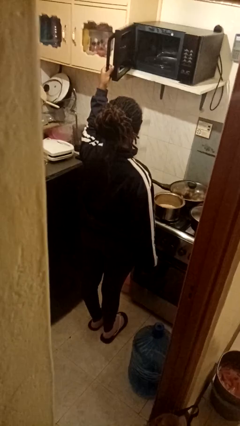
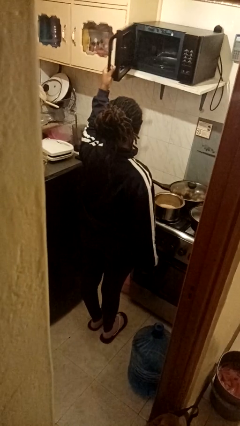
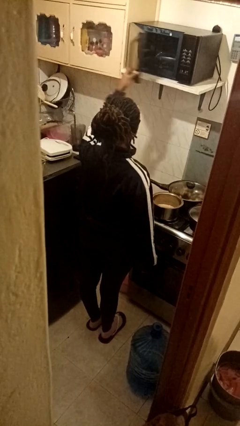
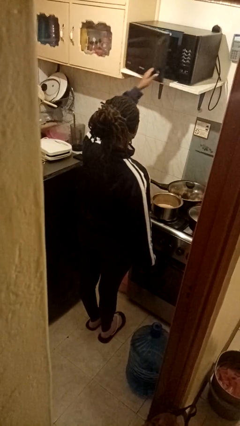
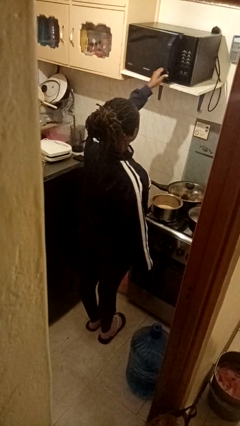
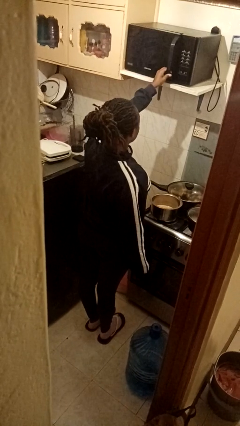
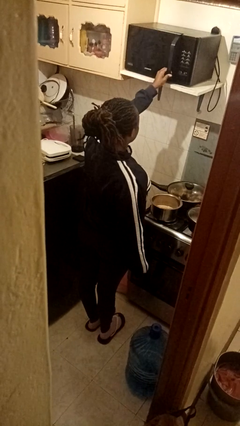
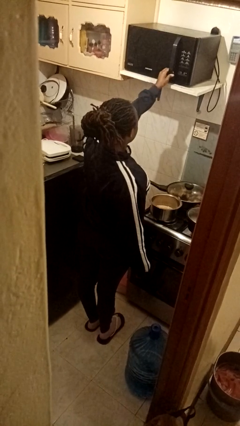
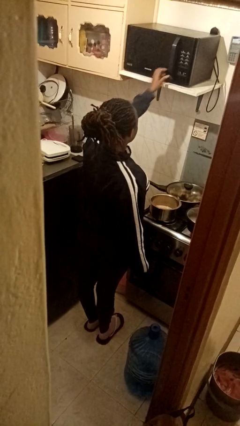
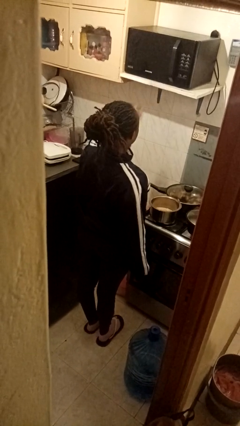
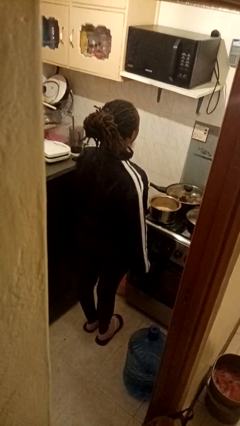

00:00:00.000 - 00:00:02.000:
person closes microwave

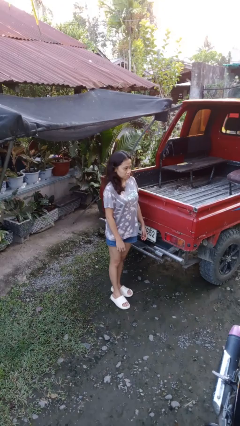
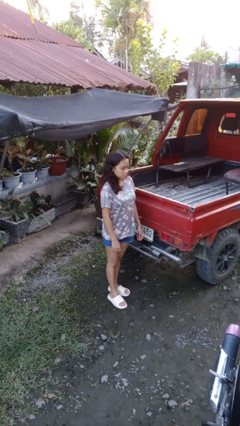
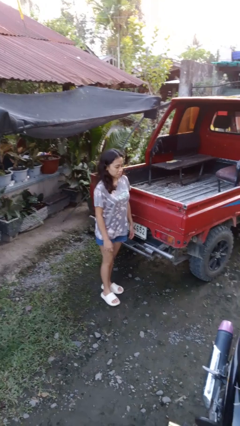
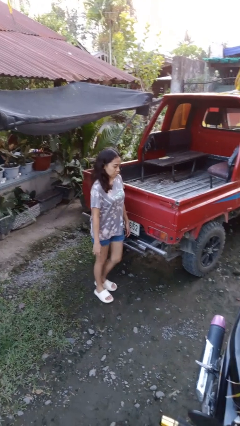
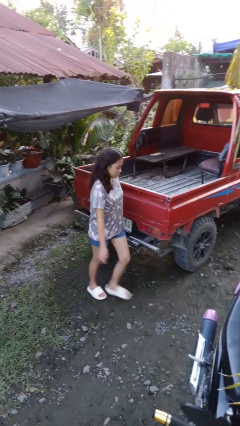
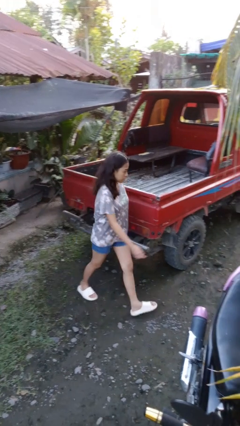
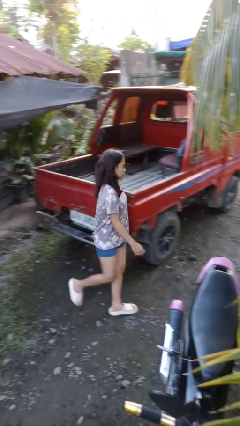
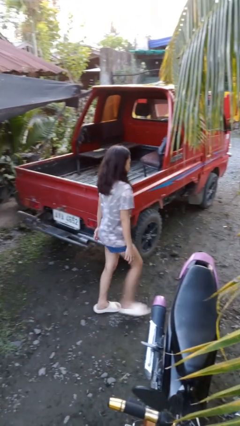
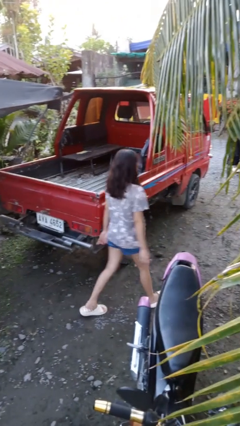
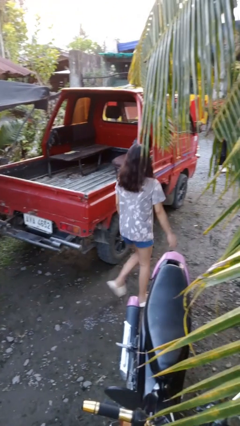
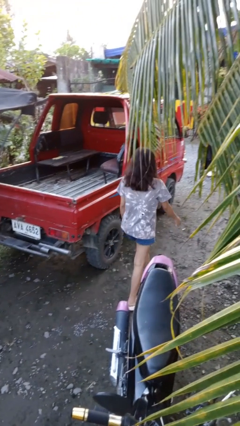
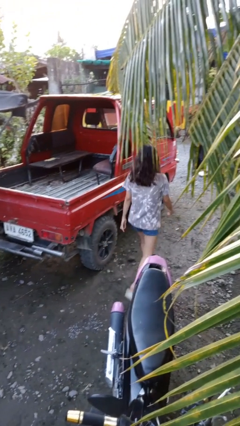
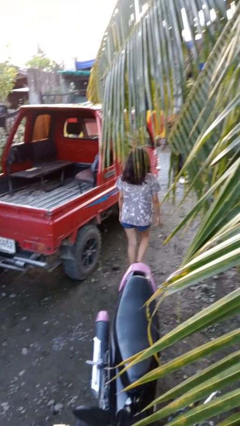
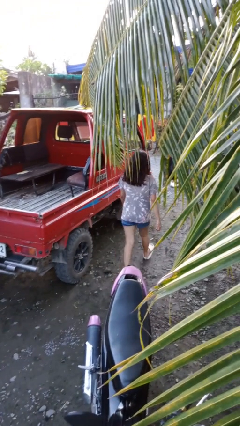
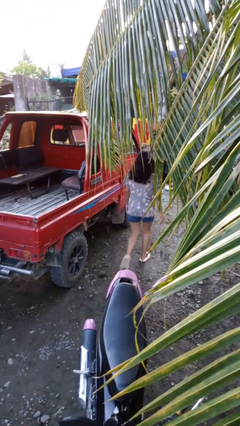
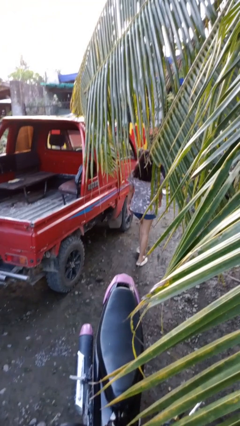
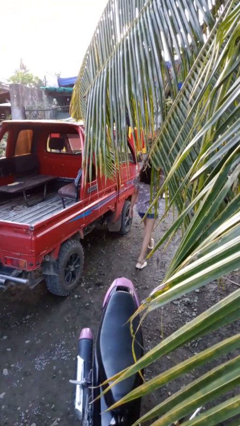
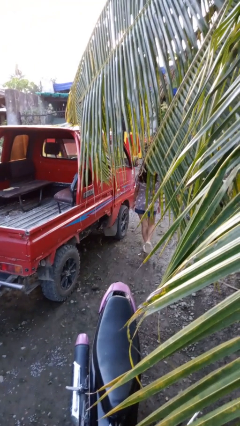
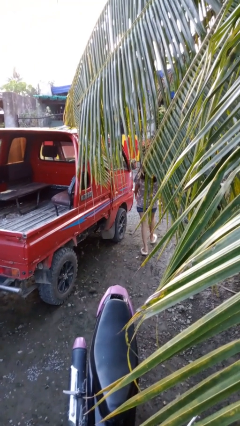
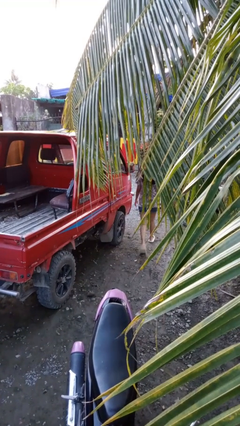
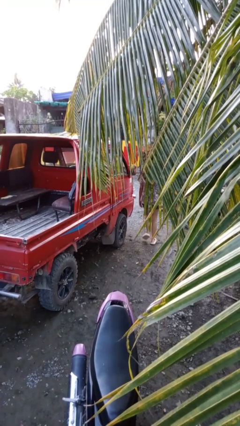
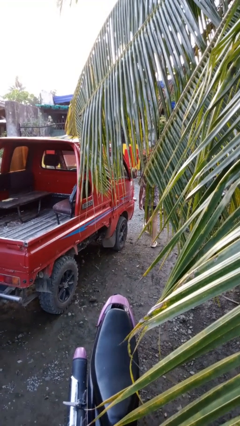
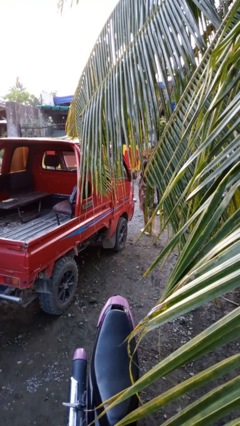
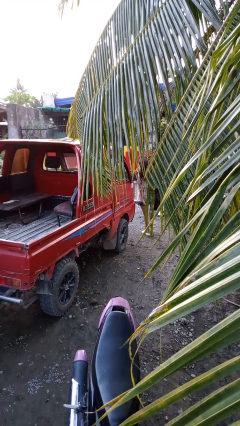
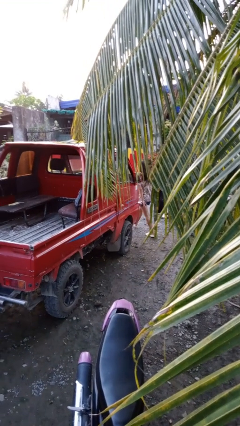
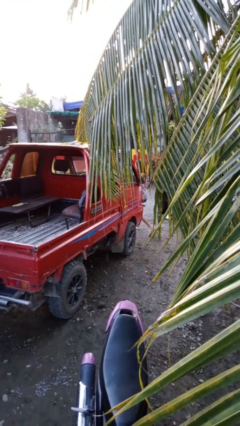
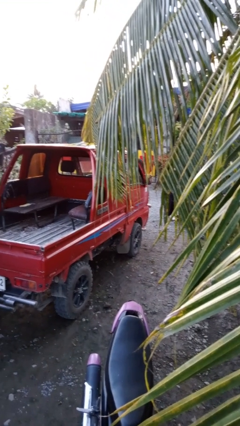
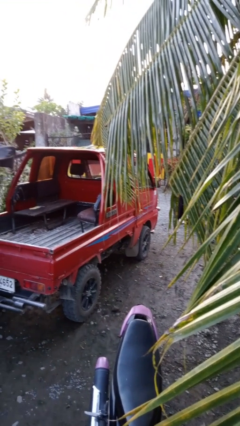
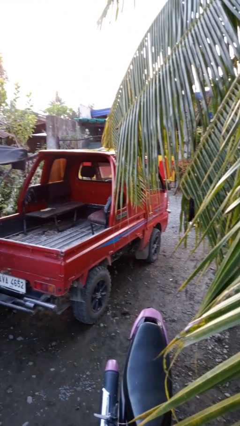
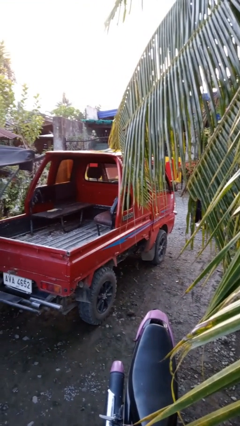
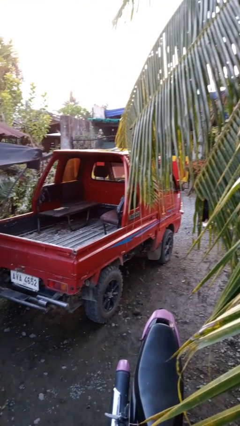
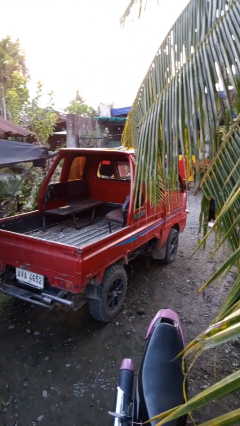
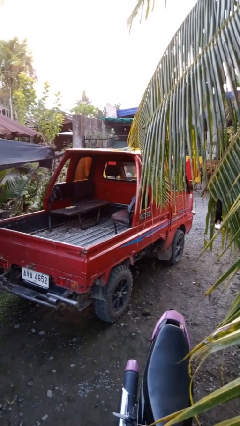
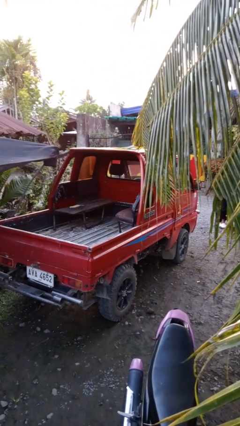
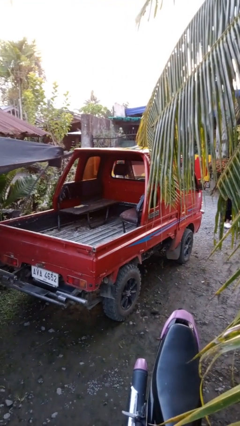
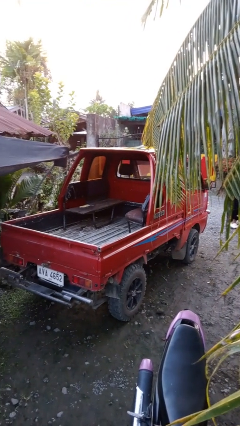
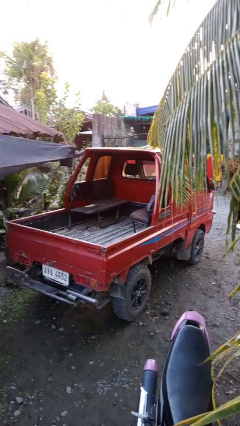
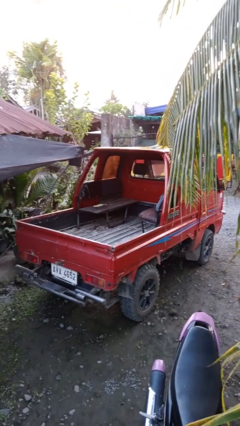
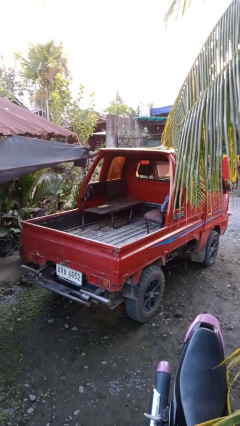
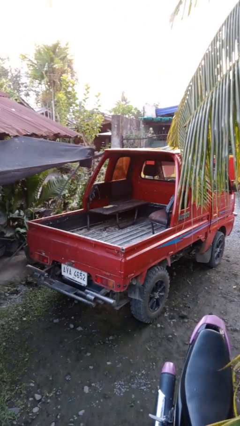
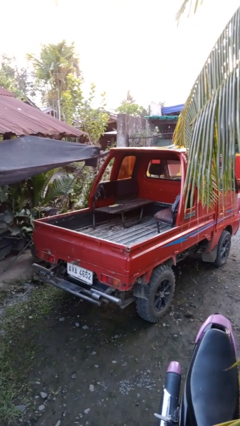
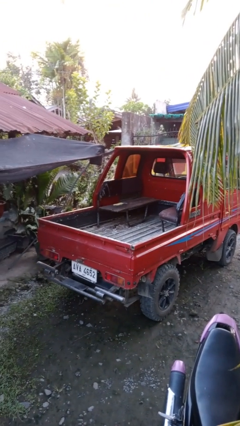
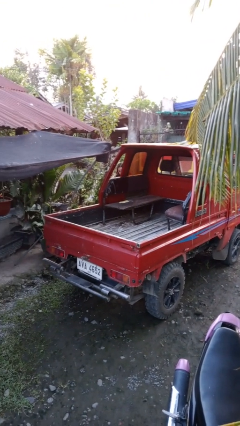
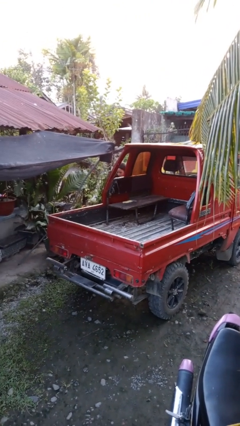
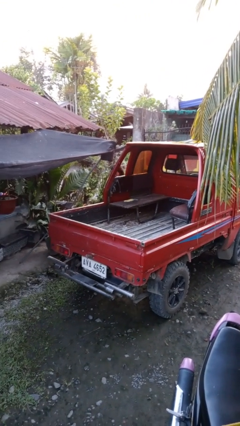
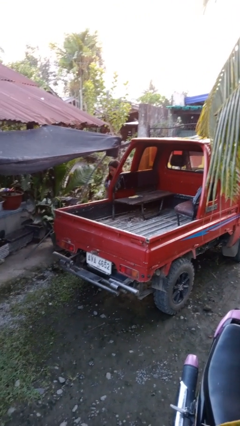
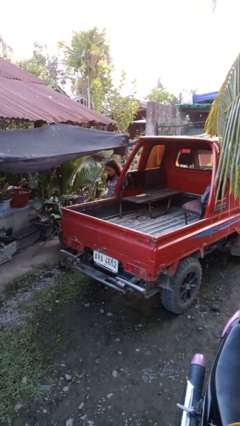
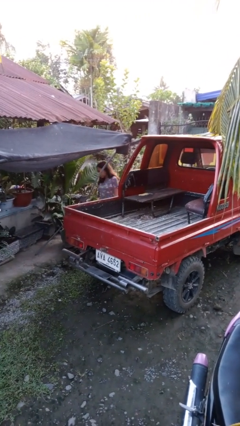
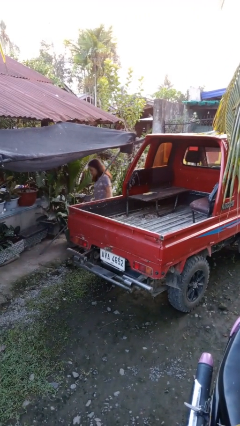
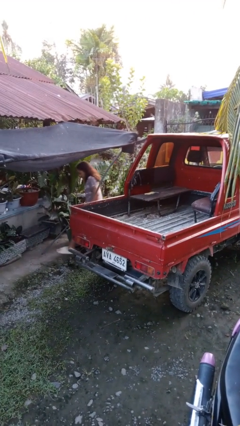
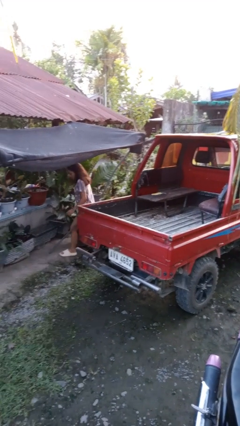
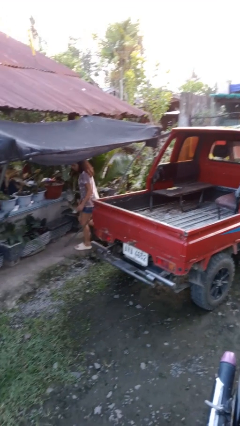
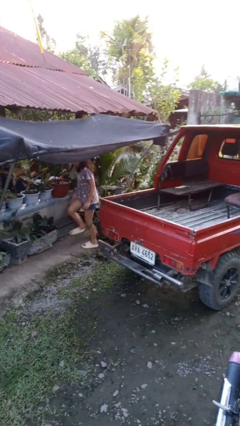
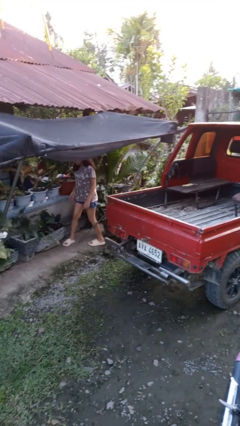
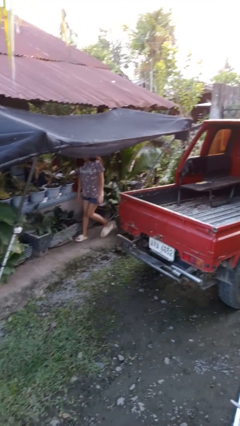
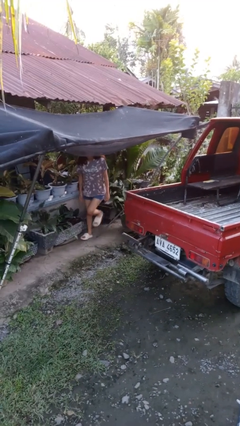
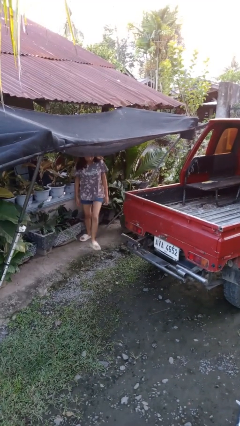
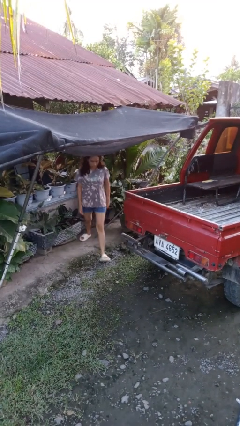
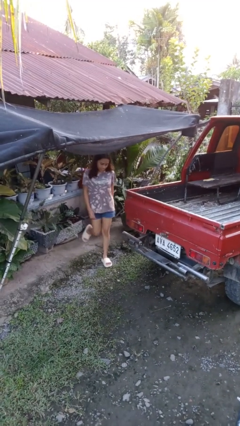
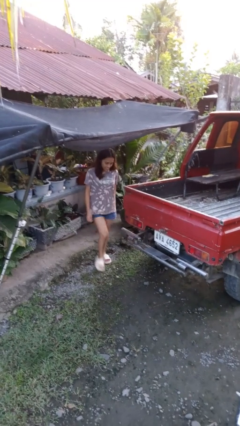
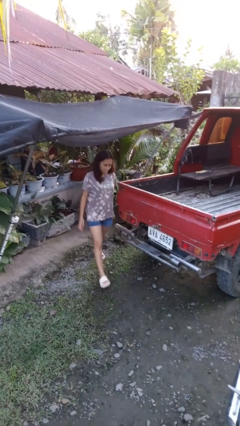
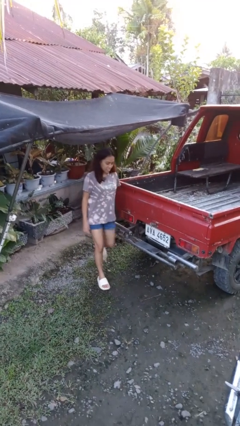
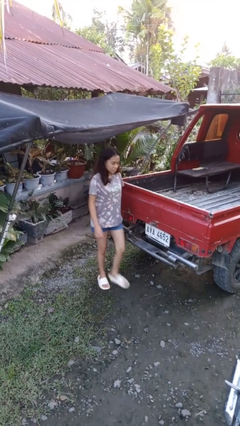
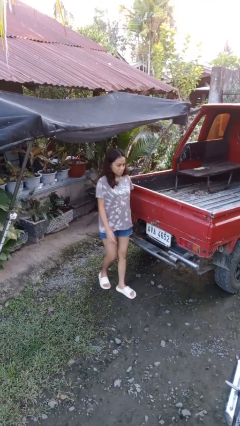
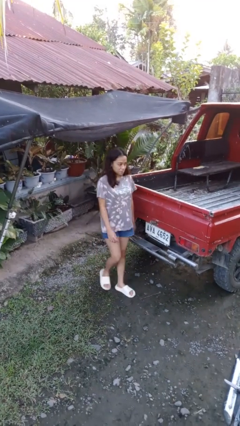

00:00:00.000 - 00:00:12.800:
person walks around car

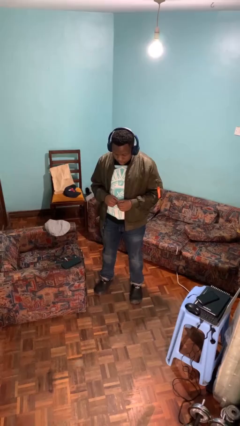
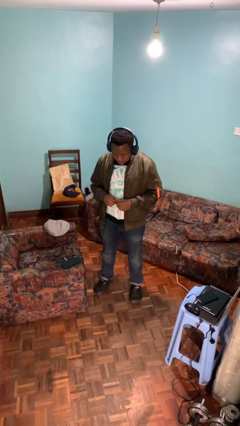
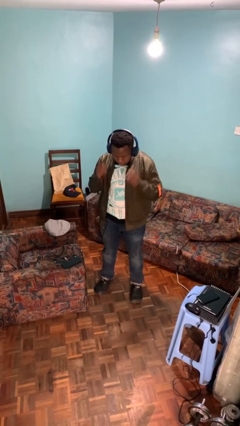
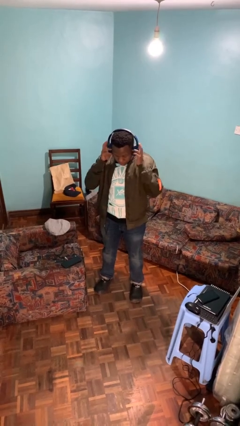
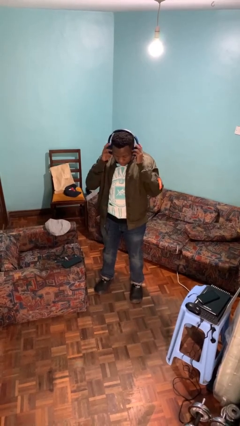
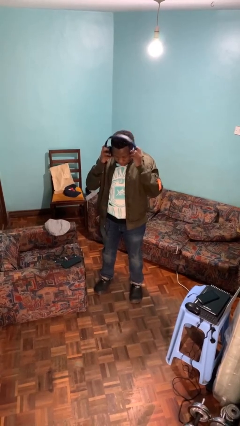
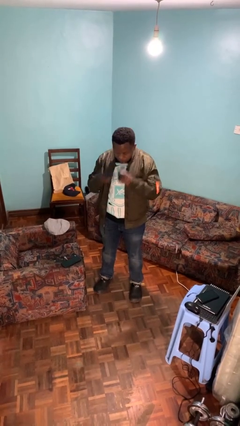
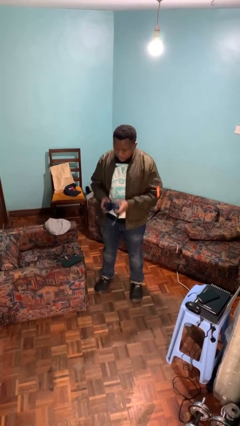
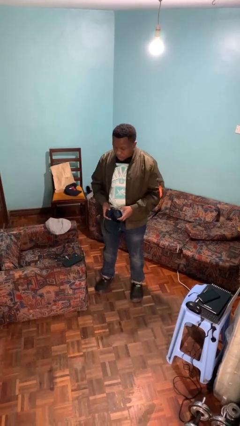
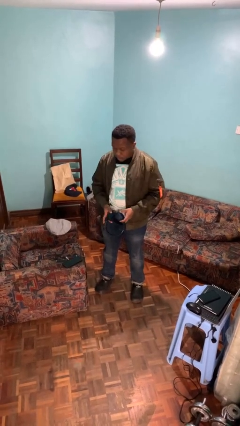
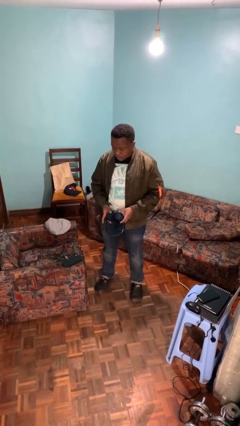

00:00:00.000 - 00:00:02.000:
person takes off headphones

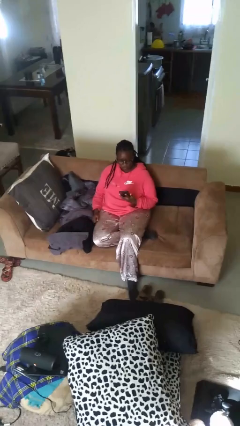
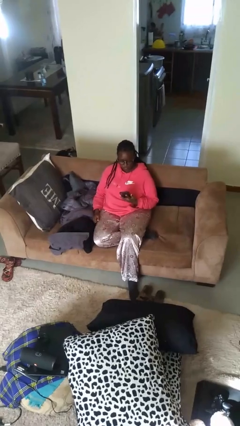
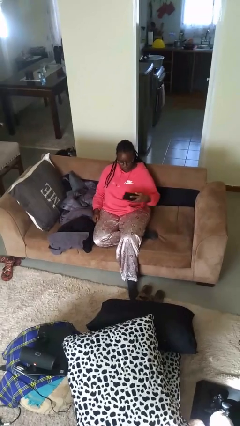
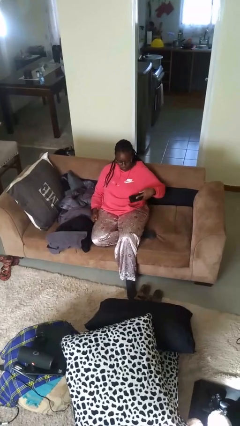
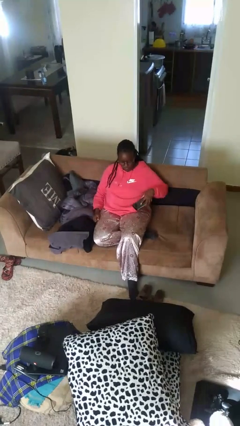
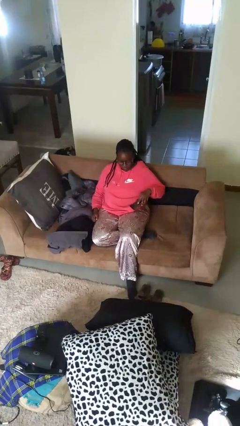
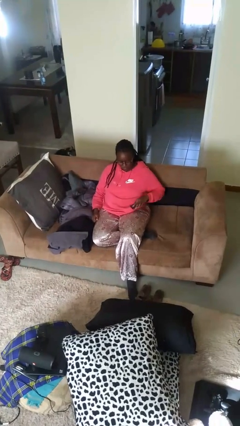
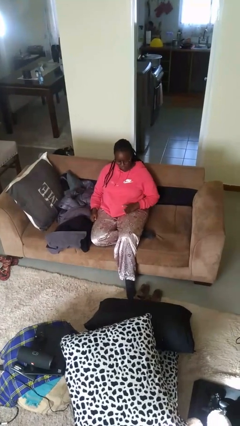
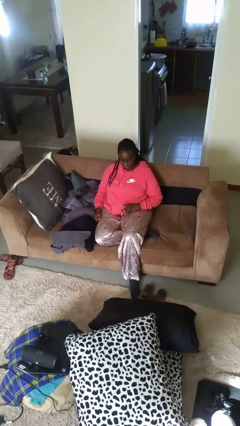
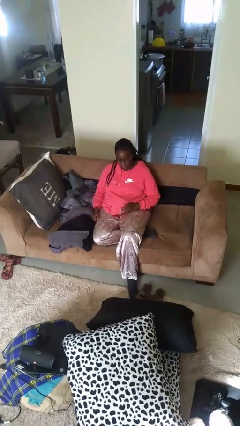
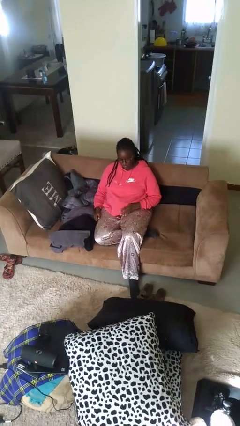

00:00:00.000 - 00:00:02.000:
person puts phone into pocket
